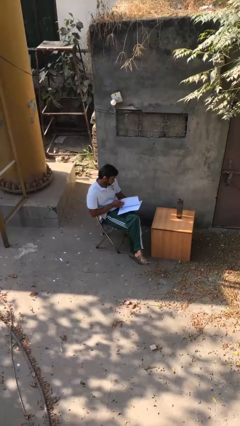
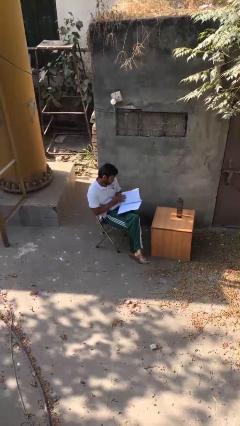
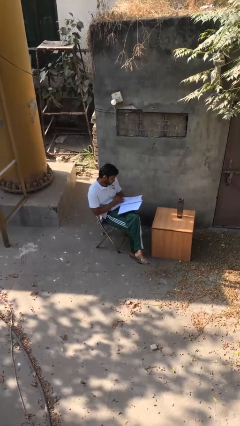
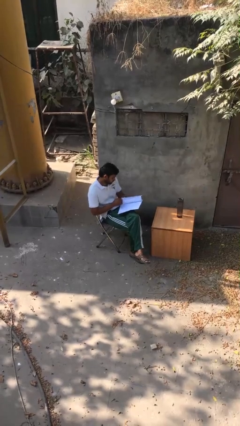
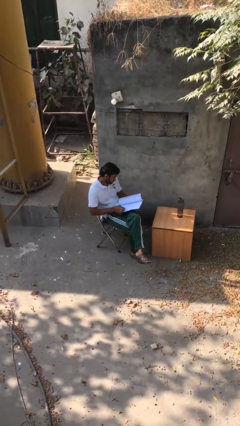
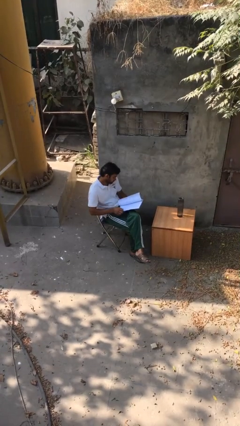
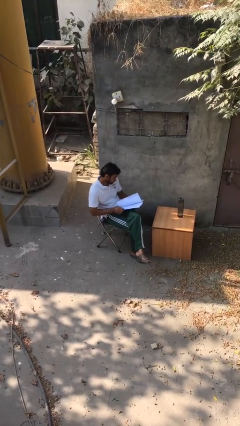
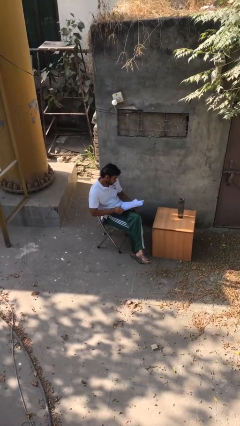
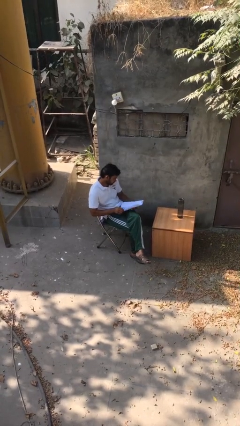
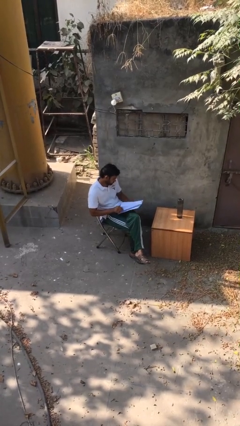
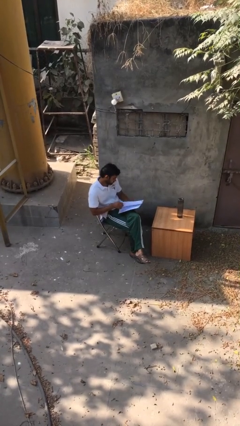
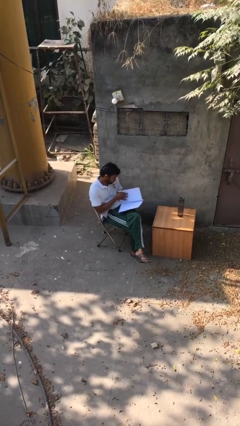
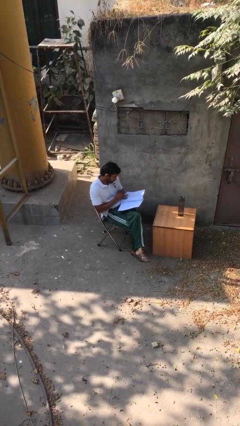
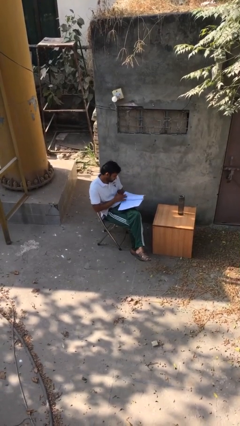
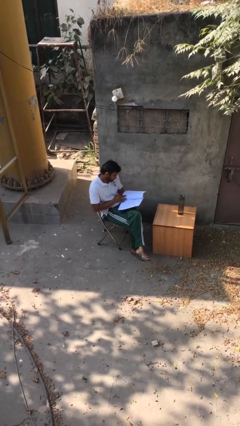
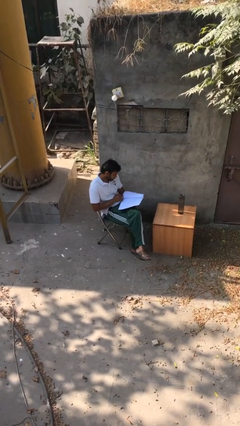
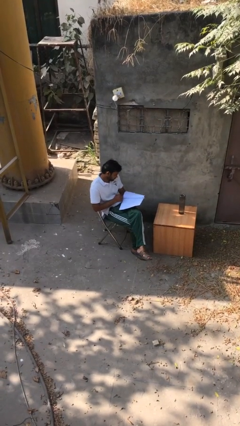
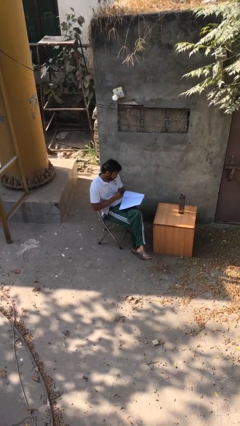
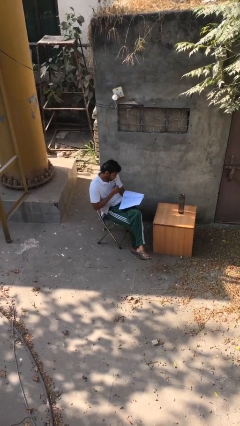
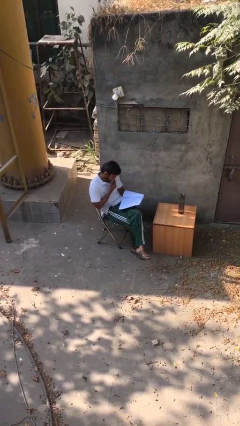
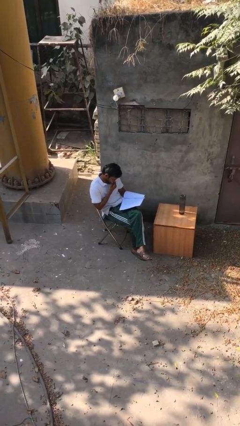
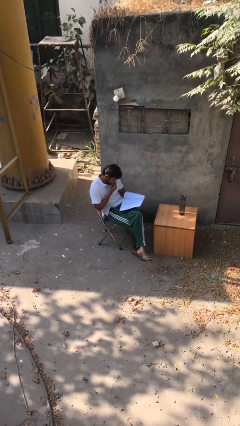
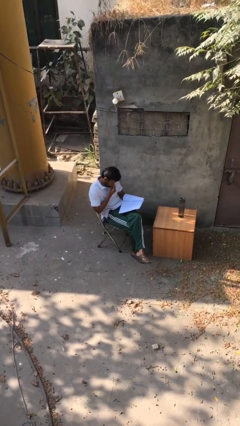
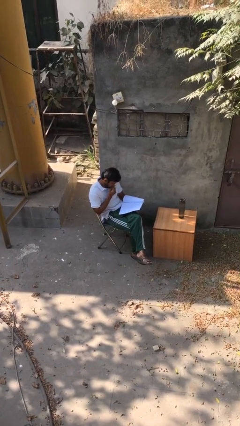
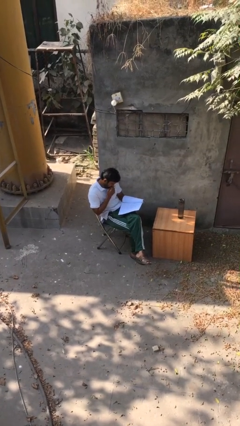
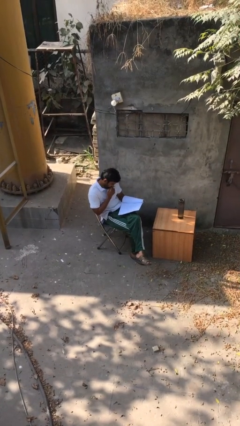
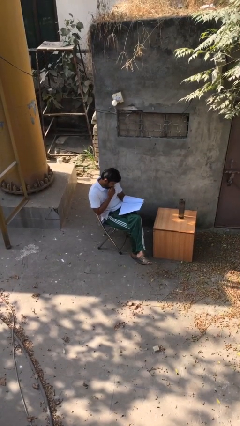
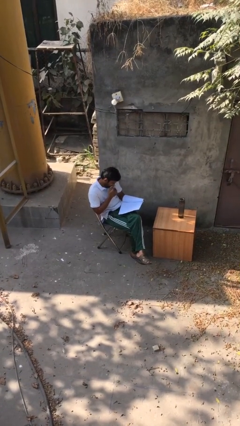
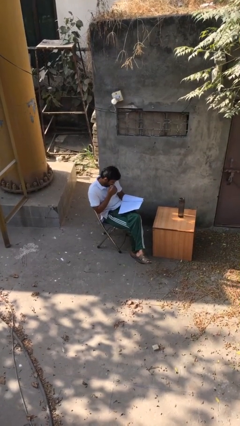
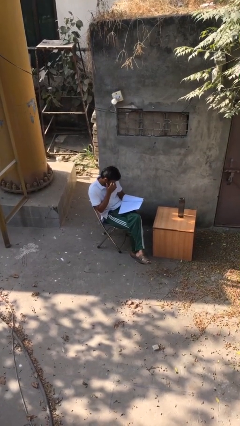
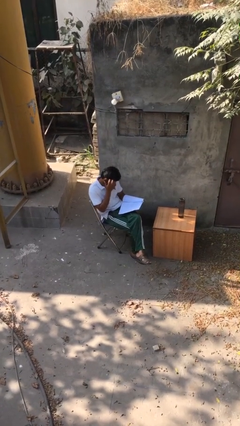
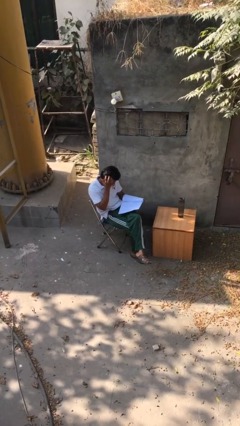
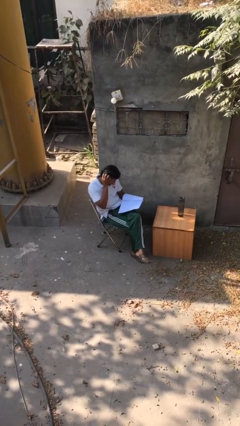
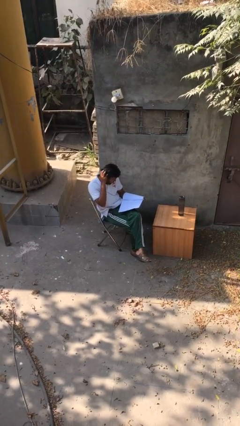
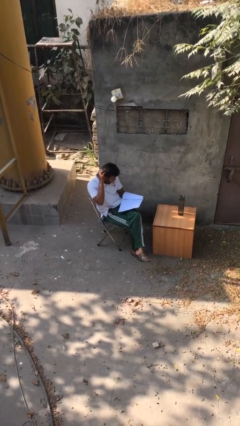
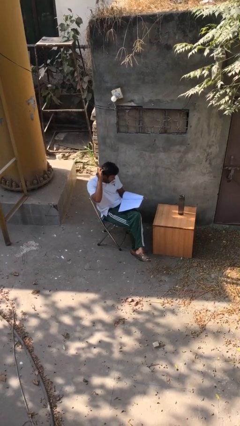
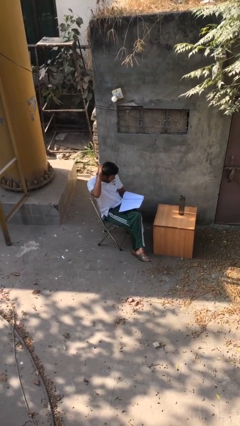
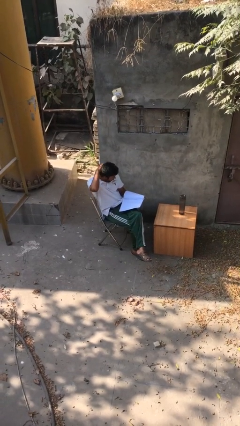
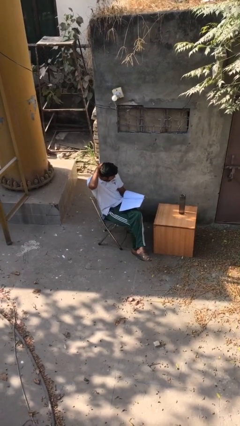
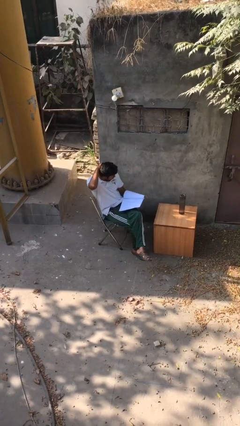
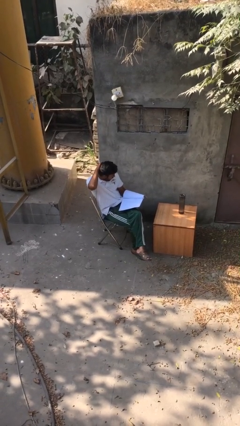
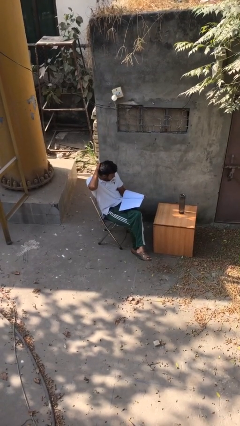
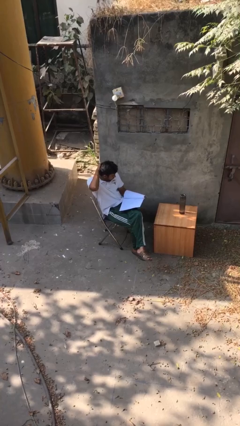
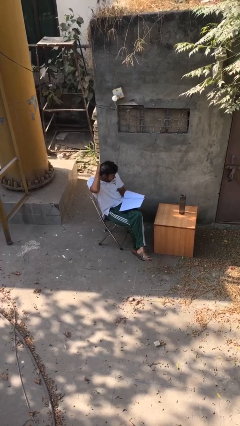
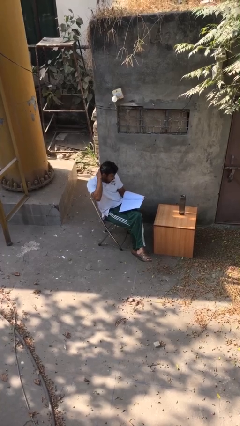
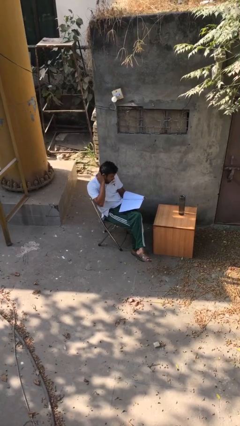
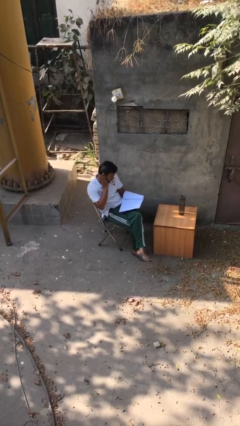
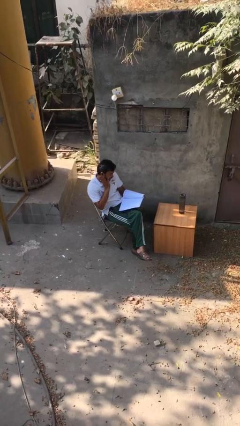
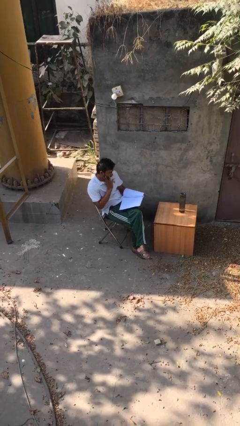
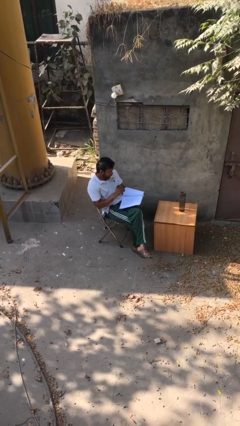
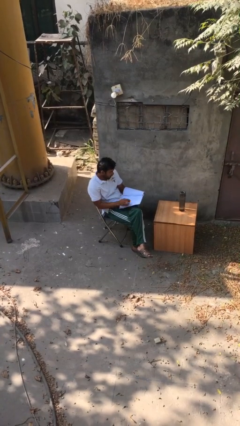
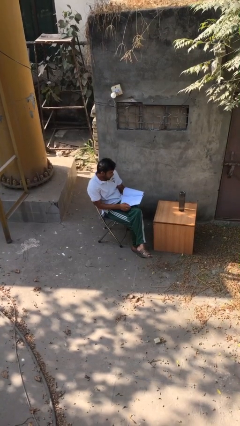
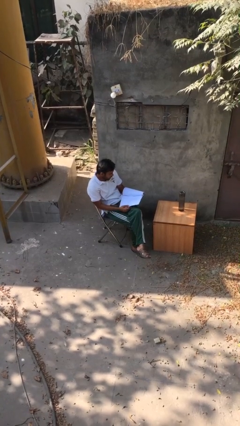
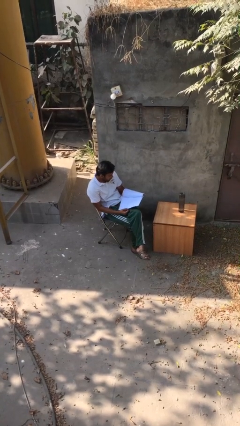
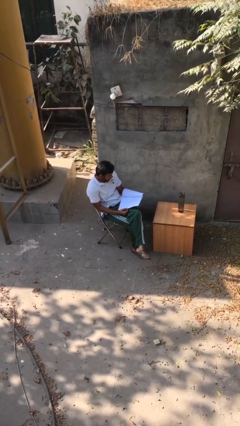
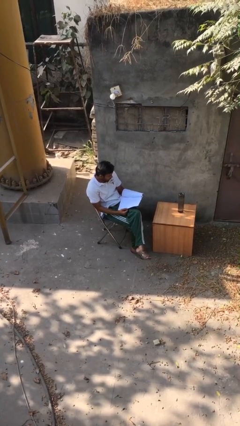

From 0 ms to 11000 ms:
person reads document

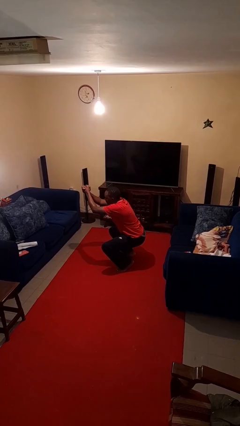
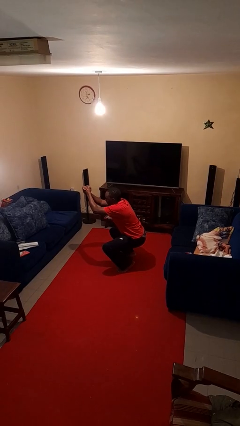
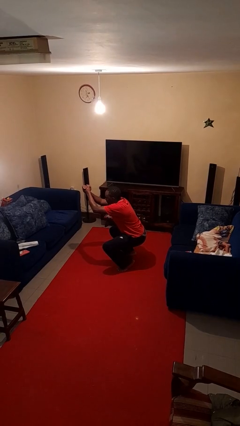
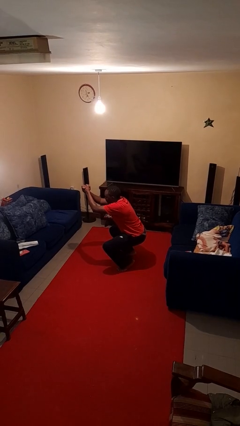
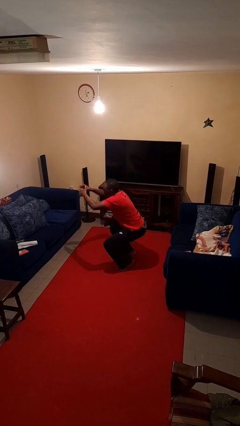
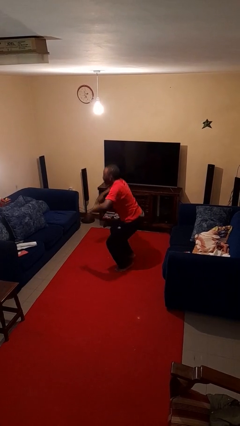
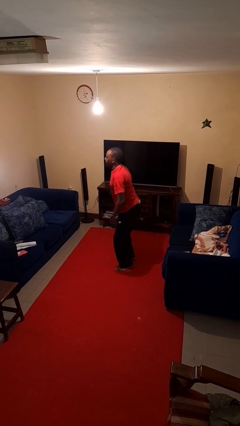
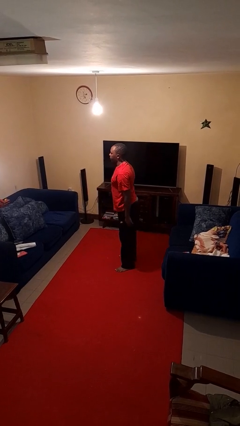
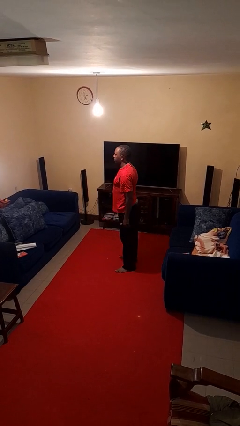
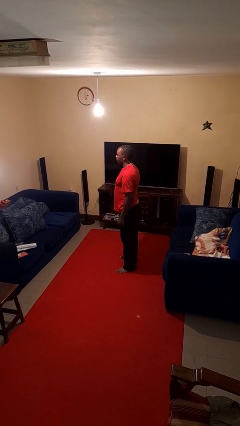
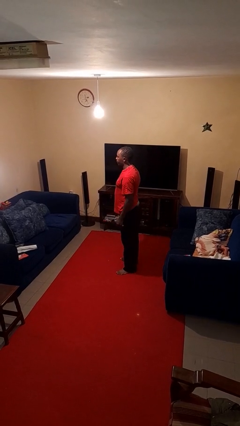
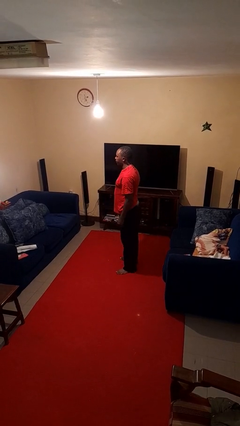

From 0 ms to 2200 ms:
person stands up

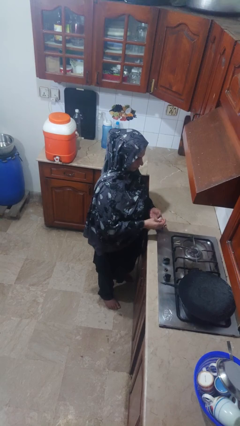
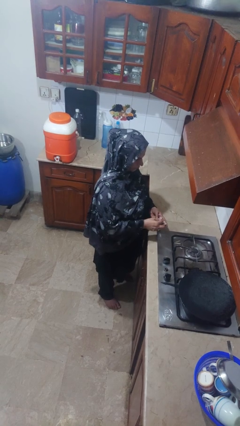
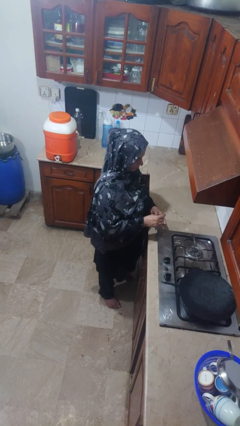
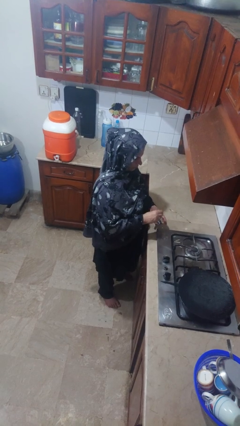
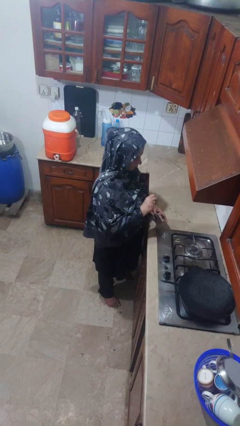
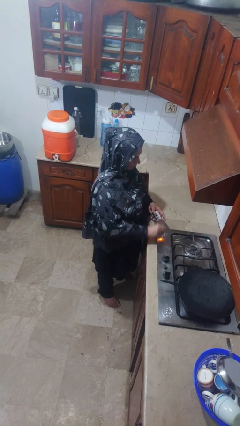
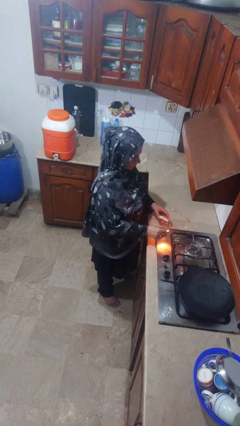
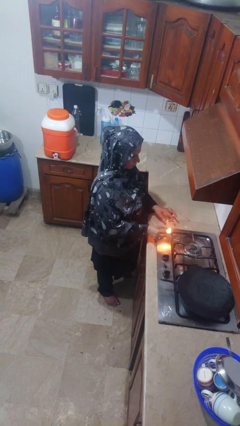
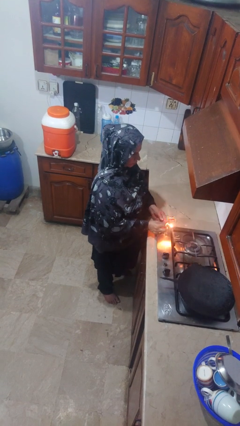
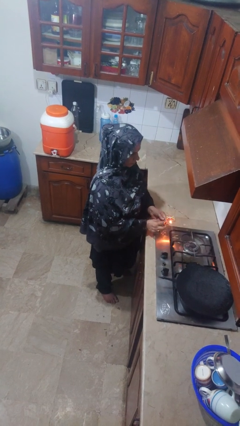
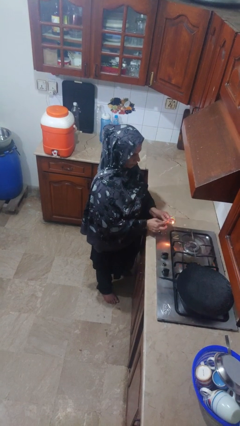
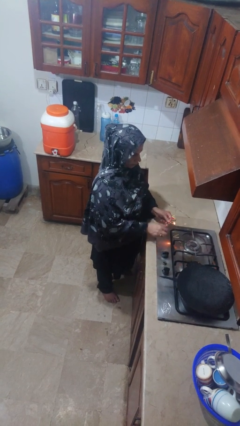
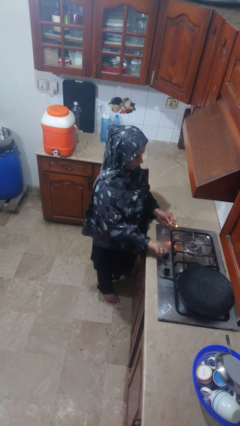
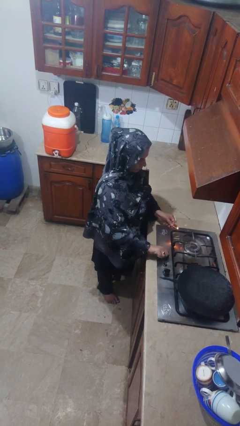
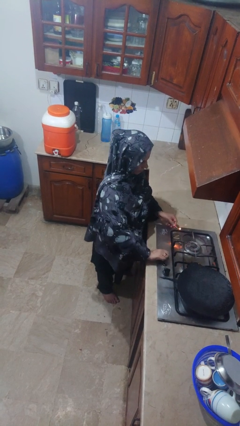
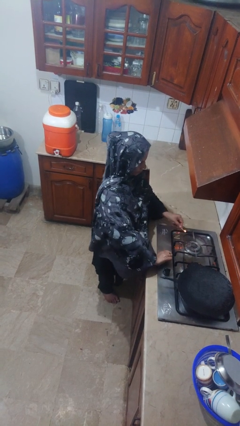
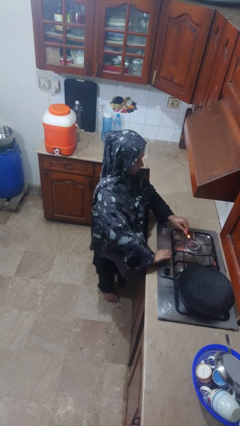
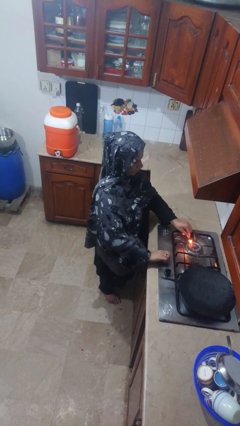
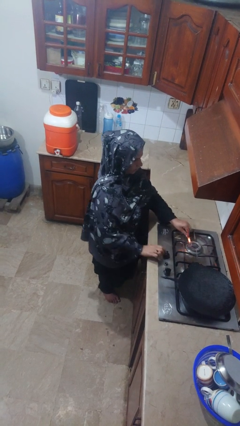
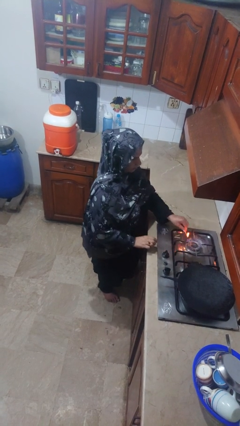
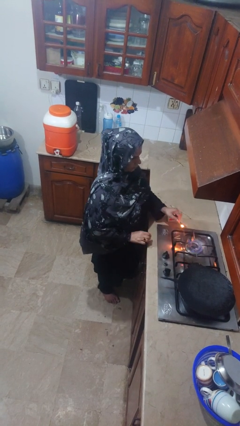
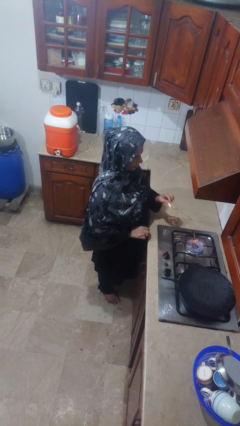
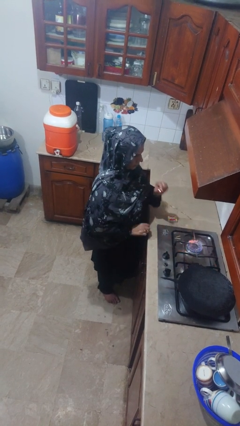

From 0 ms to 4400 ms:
person turns on stovetop

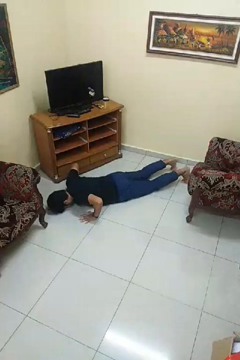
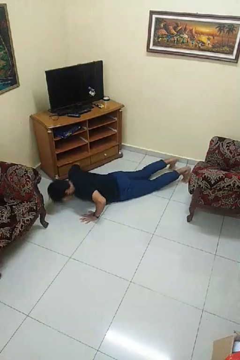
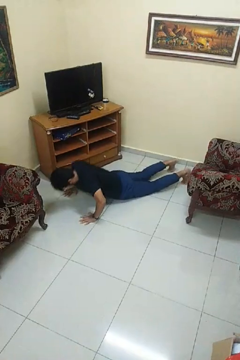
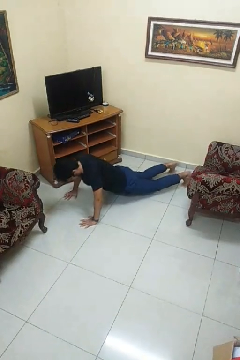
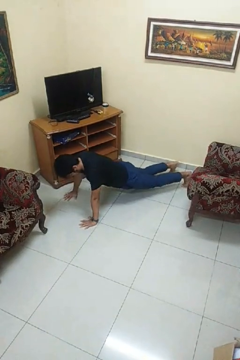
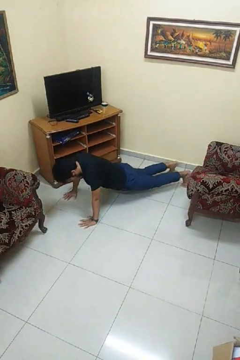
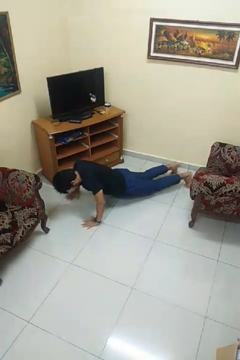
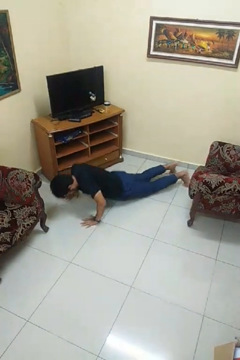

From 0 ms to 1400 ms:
person exercises with pushup
